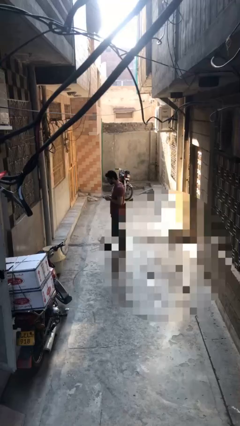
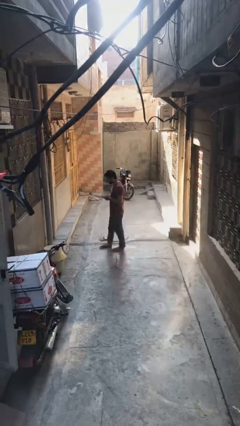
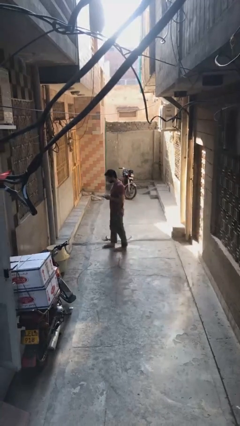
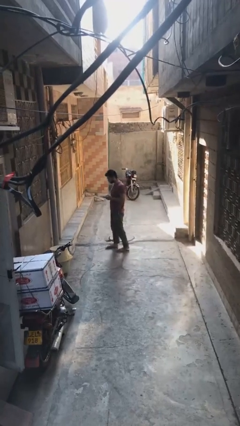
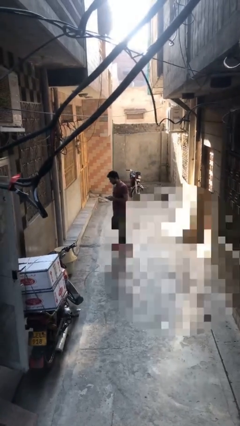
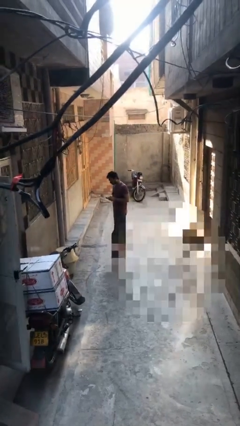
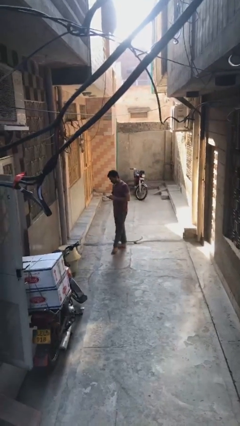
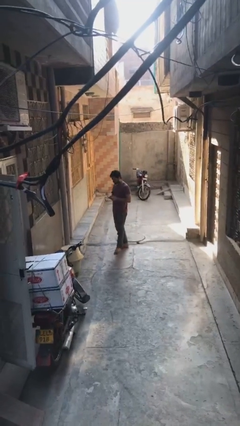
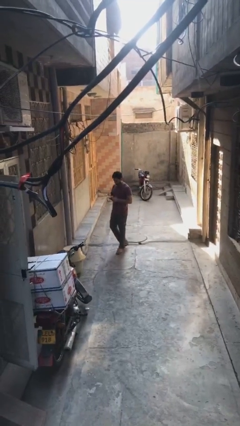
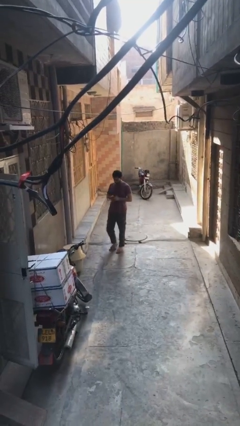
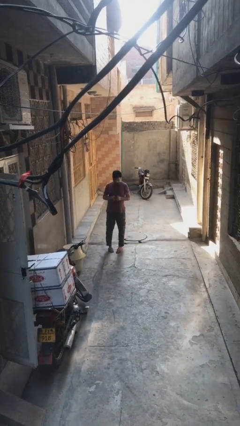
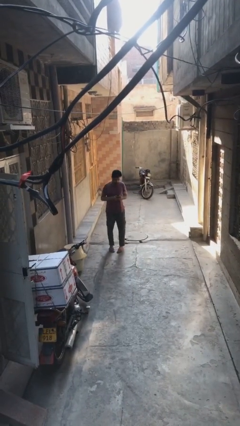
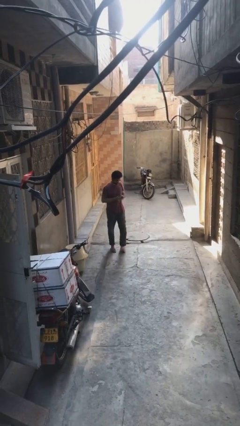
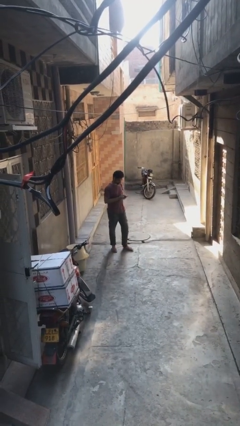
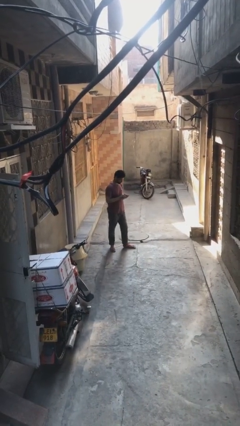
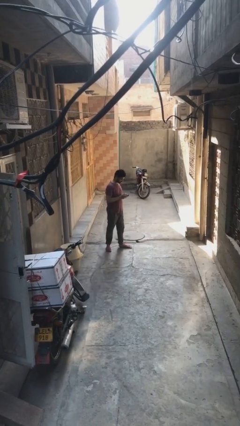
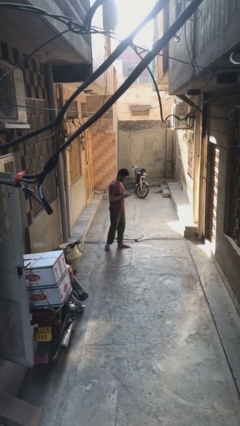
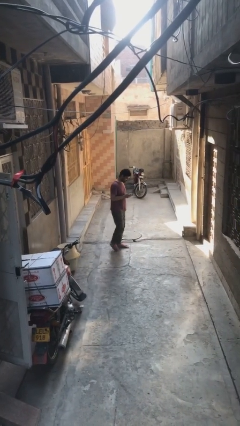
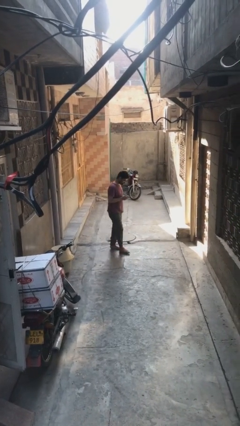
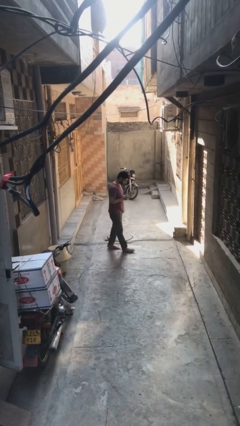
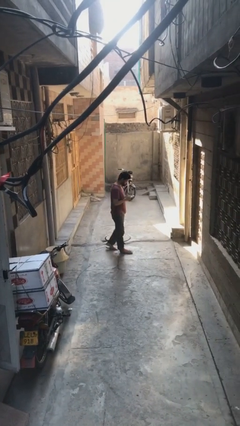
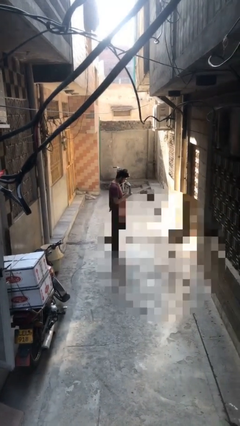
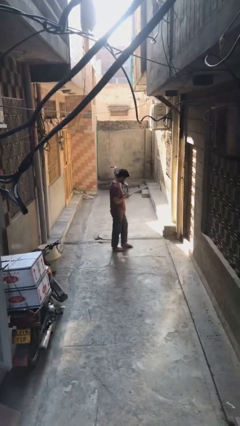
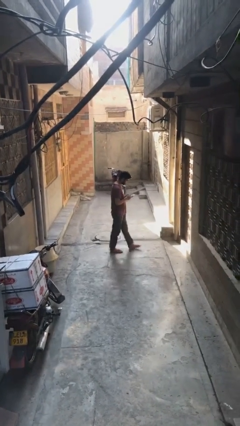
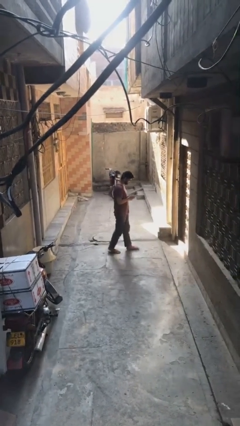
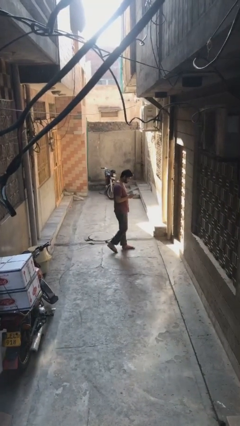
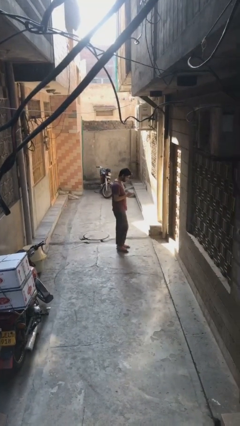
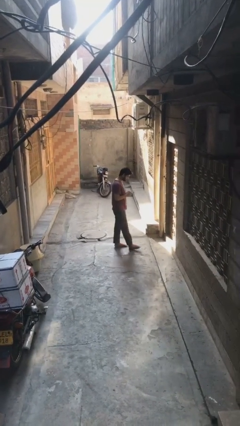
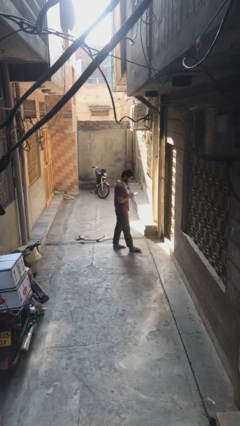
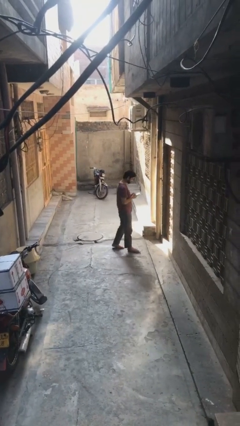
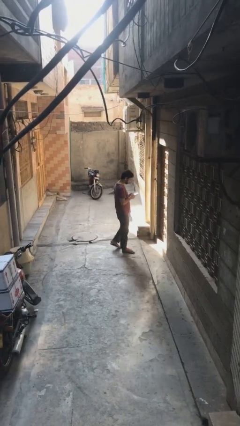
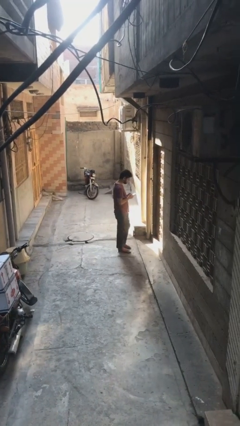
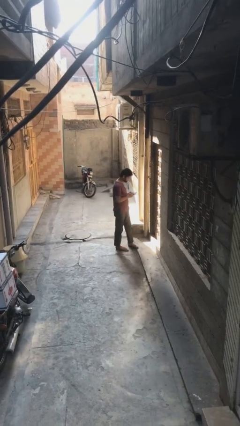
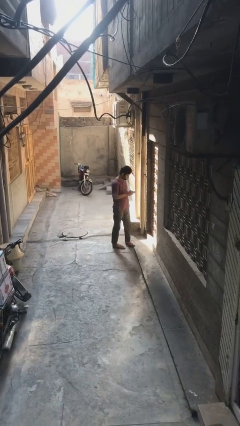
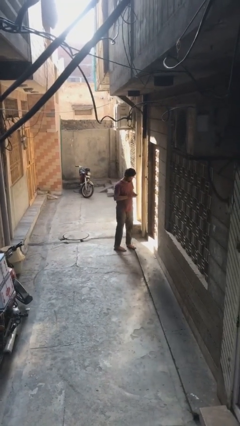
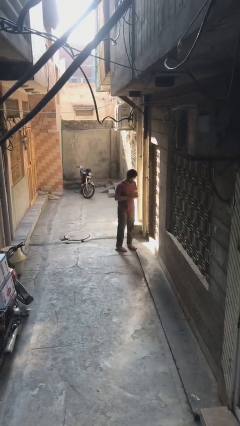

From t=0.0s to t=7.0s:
person texts on phone

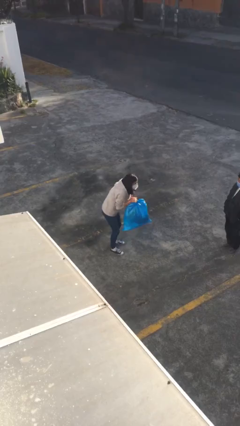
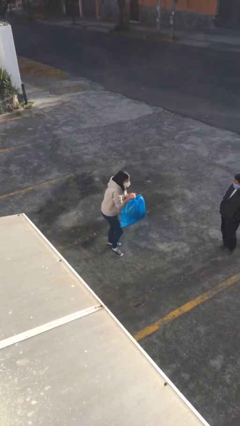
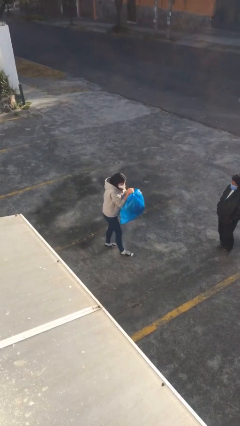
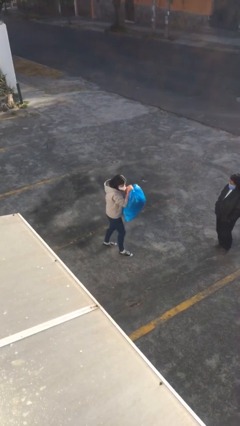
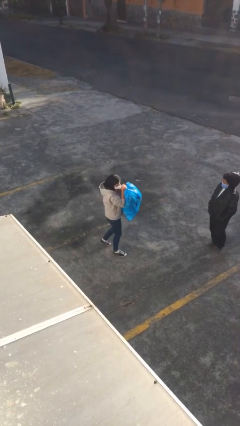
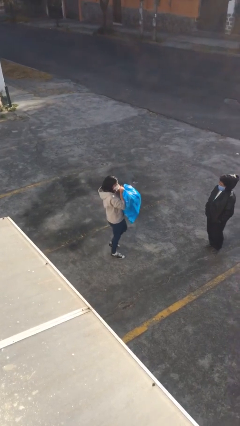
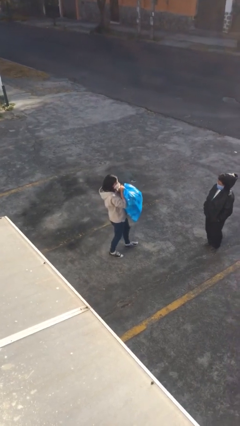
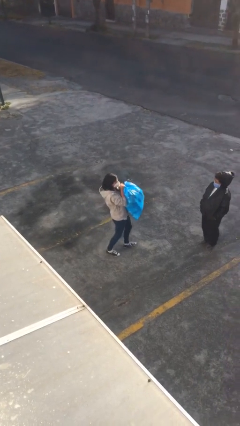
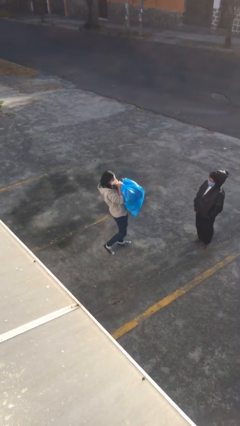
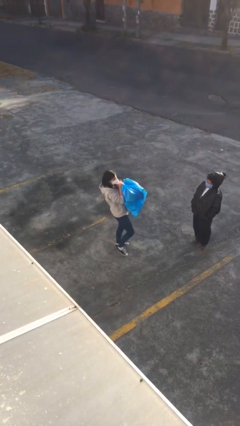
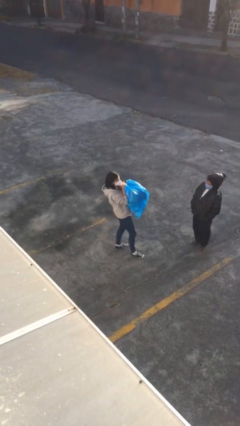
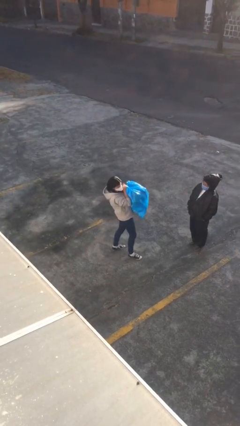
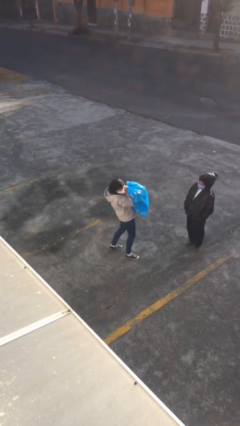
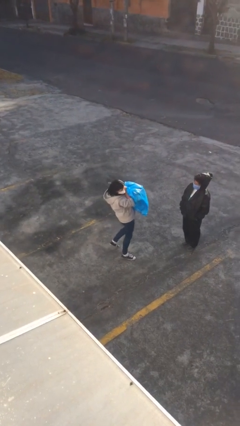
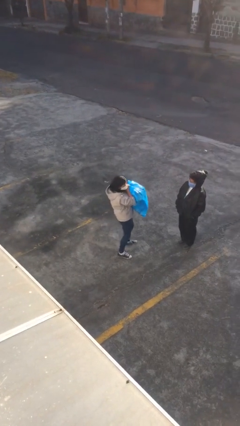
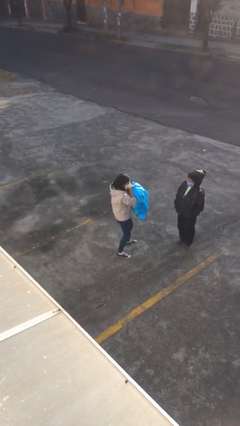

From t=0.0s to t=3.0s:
person carries heavy object

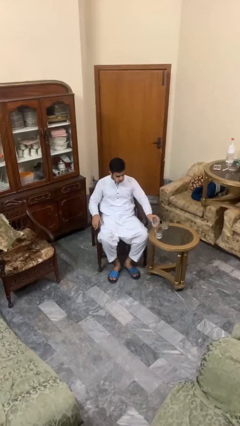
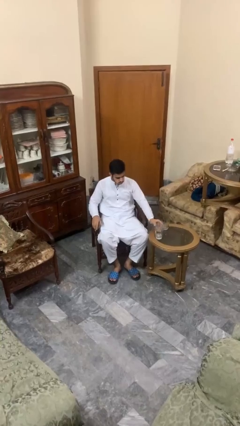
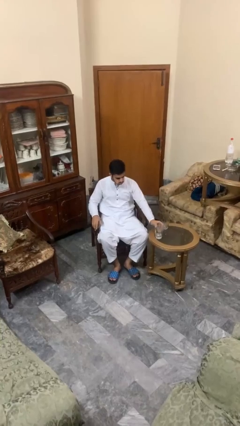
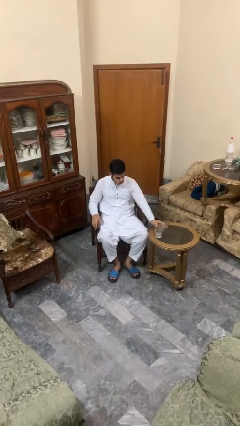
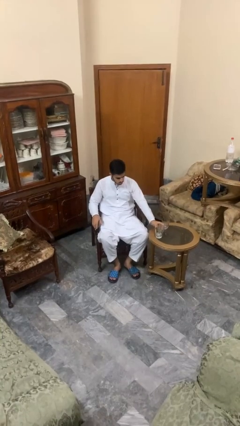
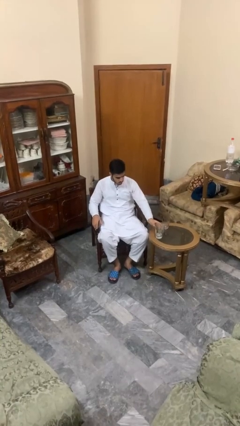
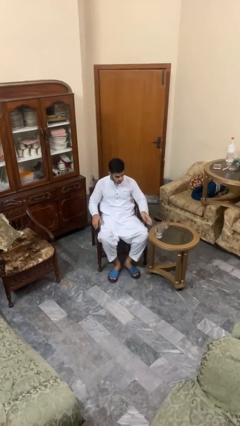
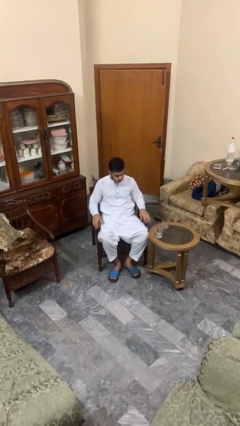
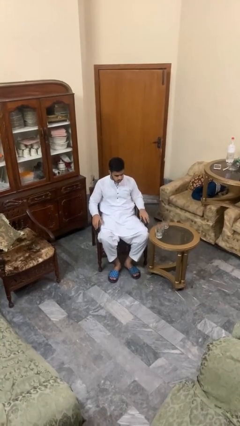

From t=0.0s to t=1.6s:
person puts down object on table

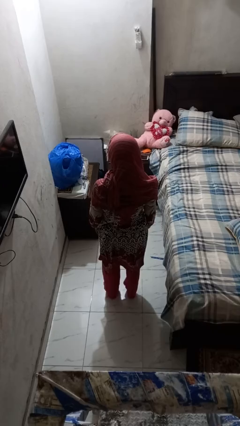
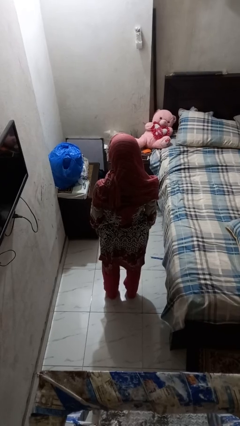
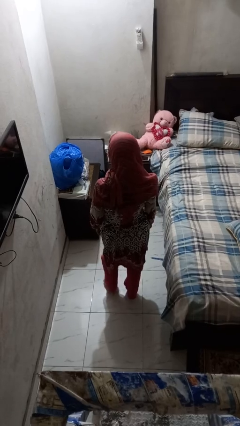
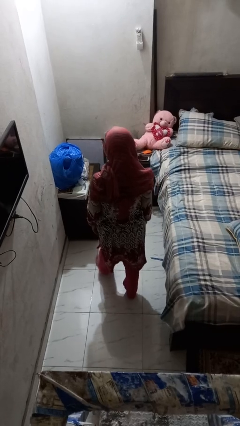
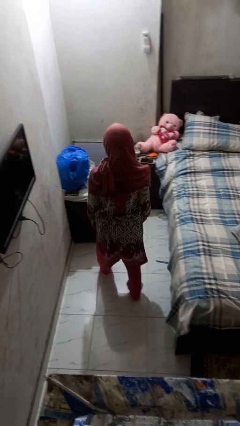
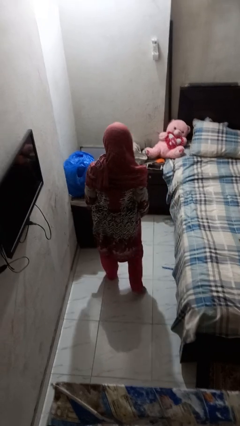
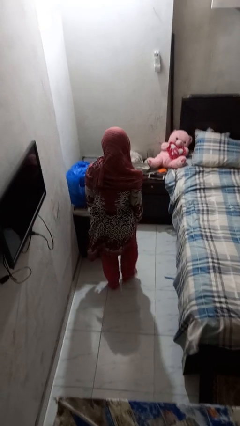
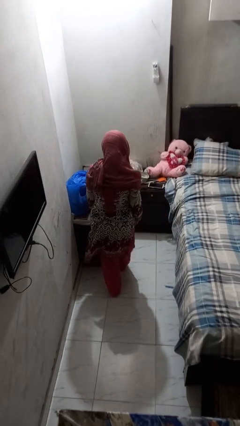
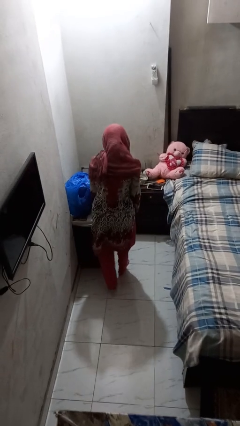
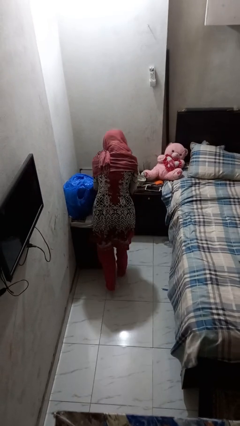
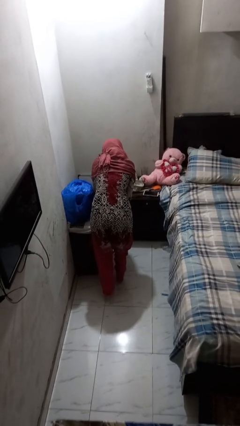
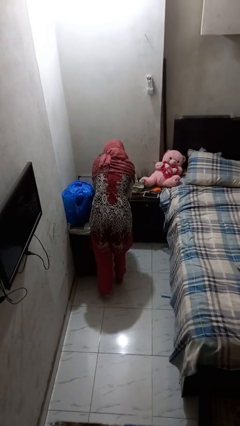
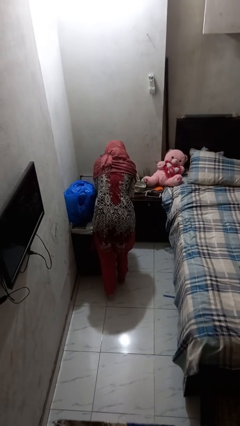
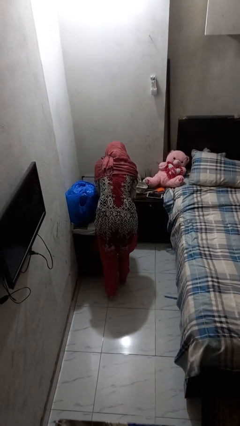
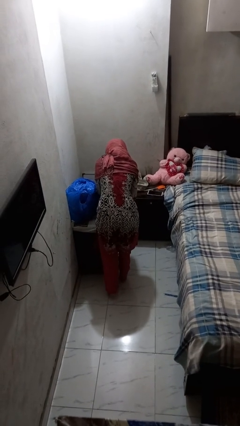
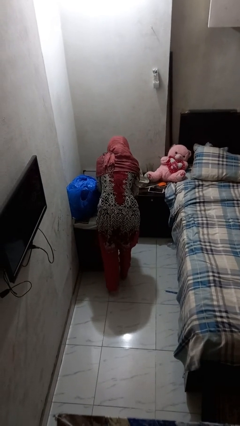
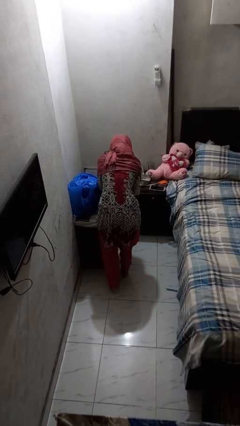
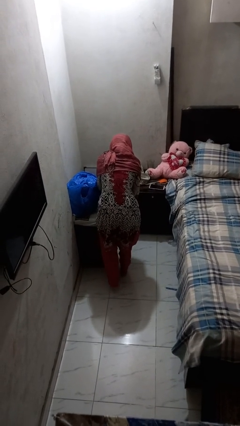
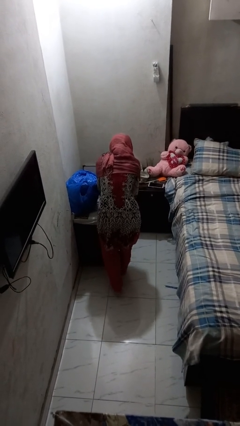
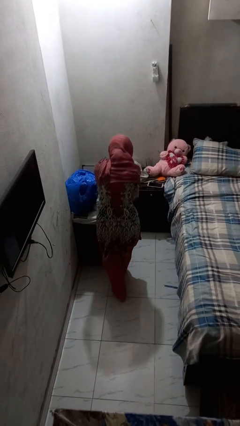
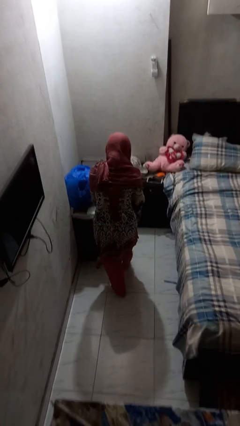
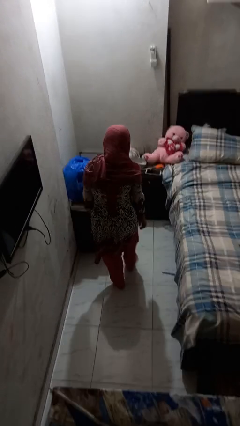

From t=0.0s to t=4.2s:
person bumps into table

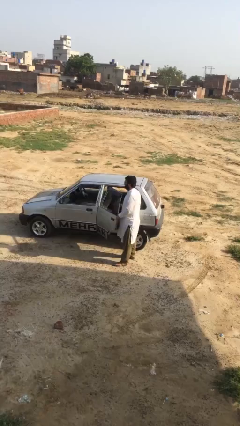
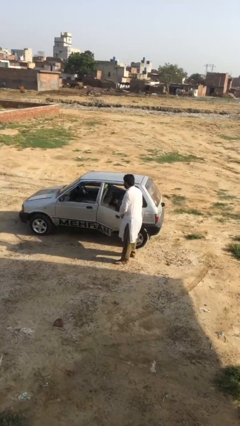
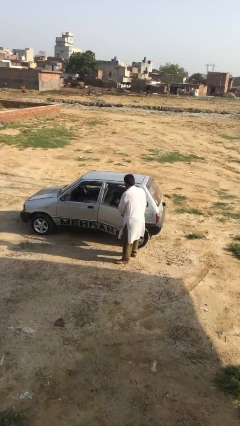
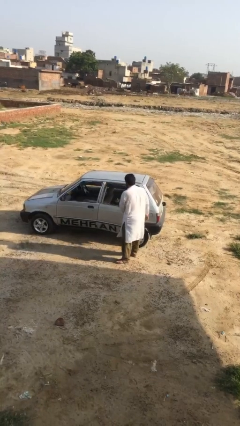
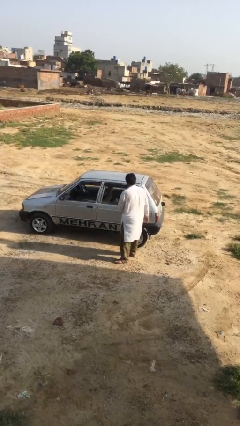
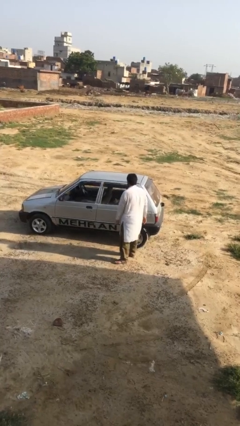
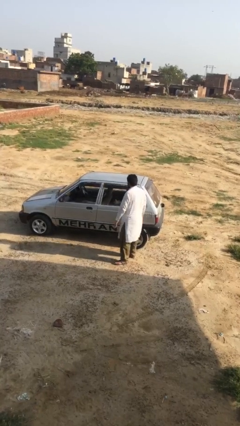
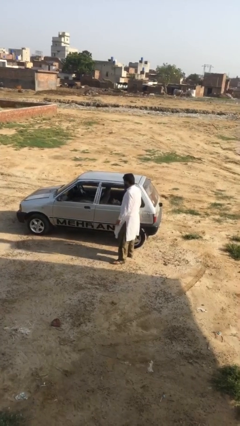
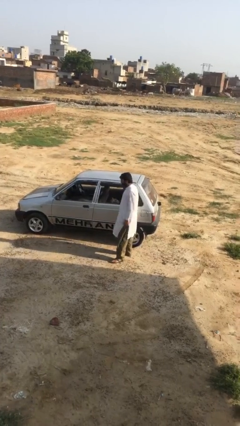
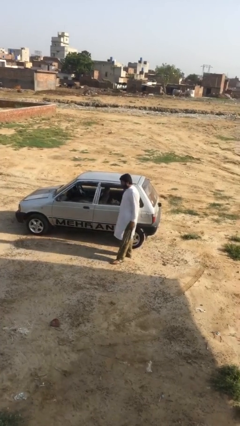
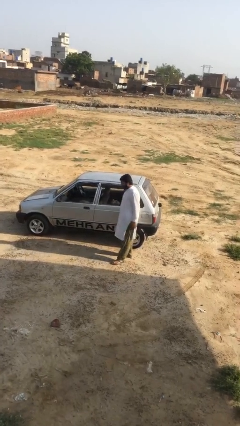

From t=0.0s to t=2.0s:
person closes car door
